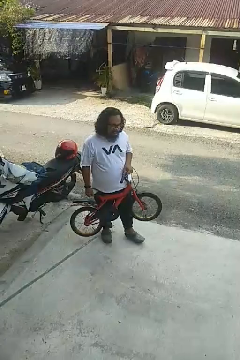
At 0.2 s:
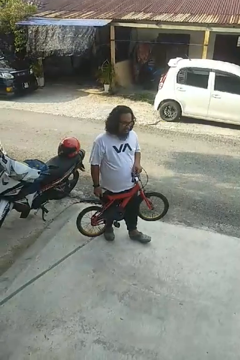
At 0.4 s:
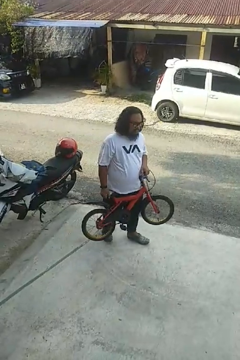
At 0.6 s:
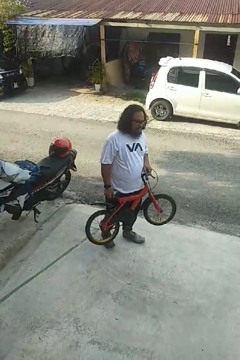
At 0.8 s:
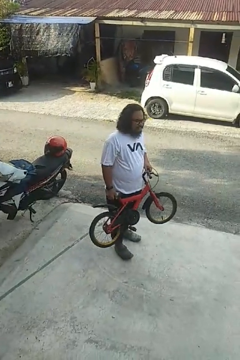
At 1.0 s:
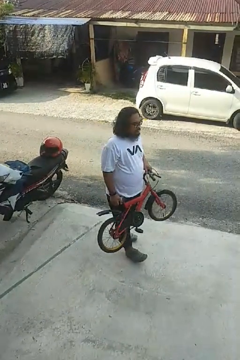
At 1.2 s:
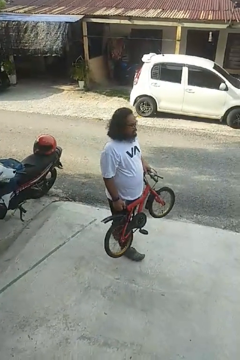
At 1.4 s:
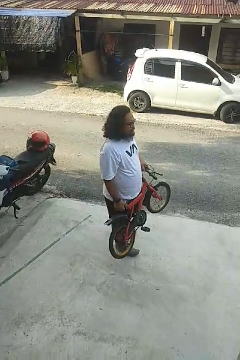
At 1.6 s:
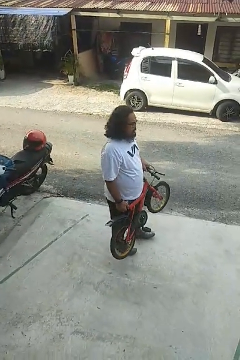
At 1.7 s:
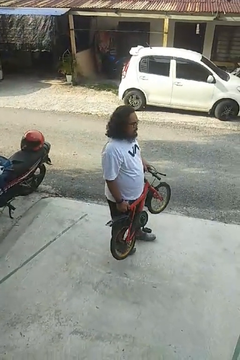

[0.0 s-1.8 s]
person carries bicycle

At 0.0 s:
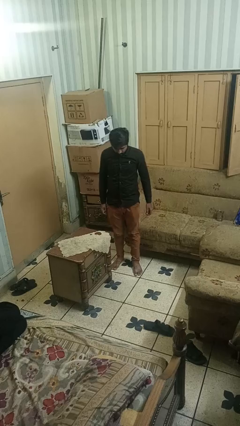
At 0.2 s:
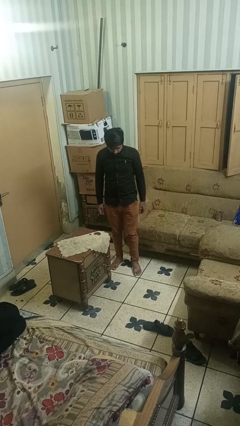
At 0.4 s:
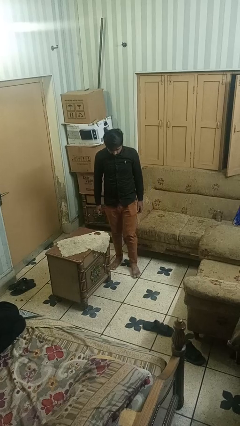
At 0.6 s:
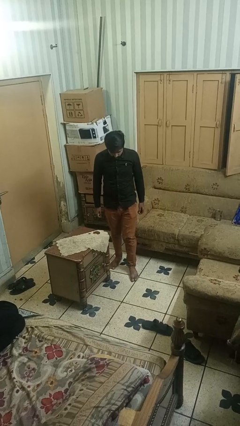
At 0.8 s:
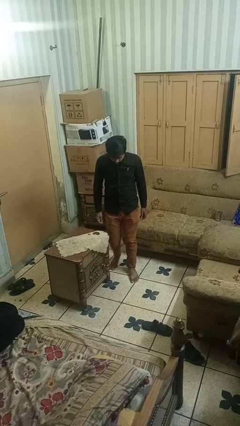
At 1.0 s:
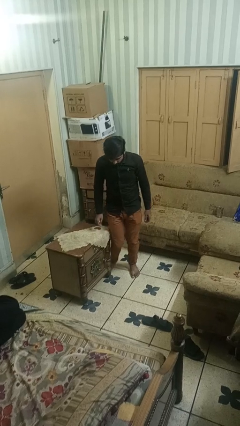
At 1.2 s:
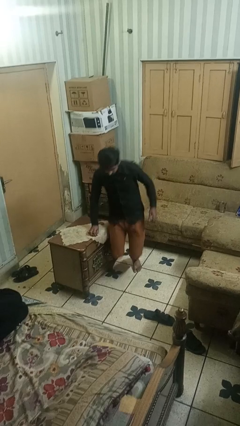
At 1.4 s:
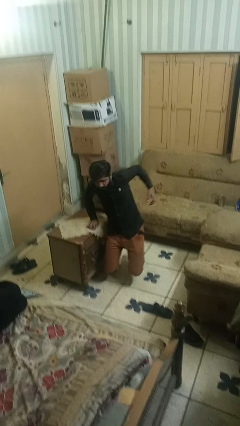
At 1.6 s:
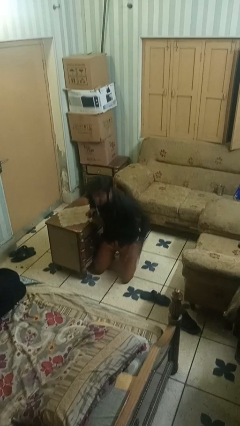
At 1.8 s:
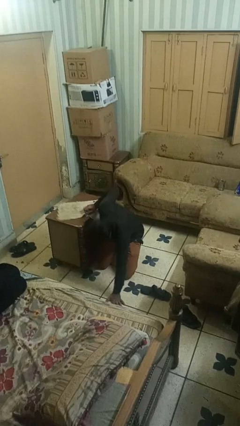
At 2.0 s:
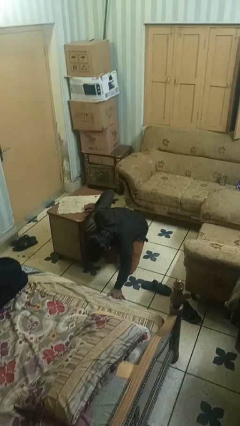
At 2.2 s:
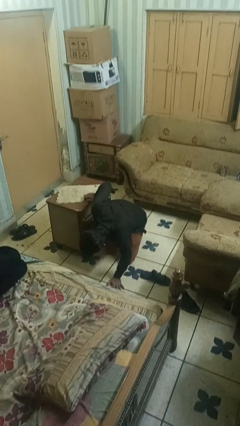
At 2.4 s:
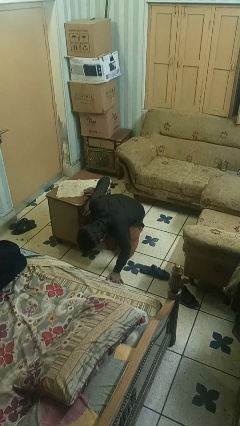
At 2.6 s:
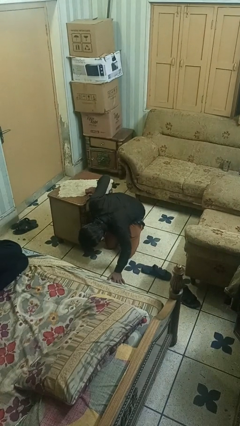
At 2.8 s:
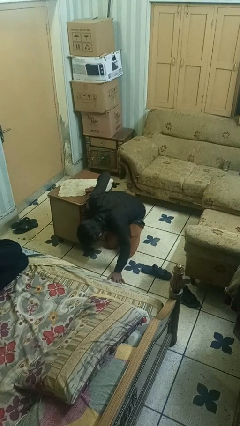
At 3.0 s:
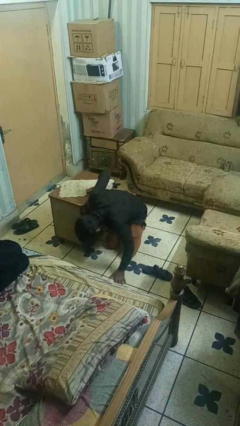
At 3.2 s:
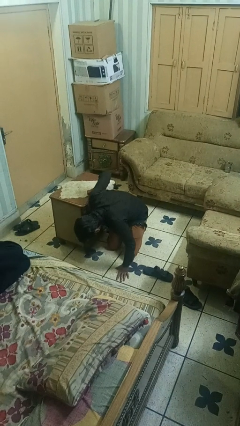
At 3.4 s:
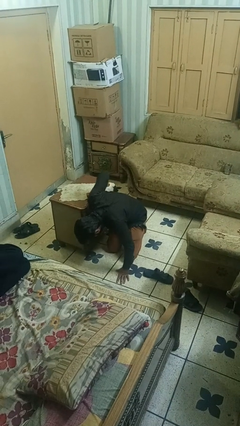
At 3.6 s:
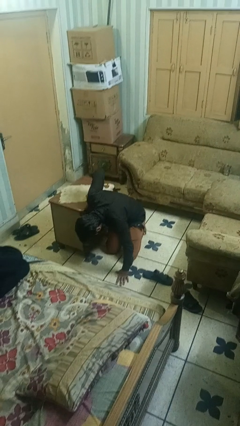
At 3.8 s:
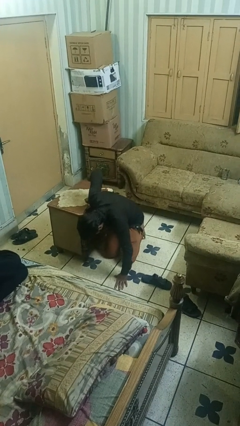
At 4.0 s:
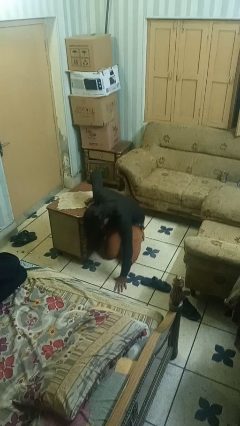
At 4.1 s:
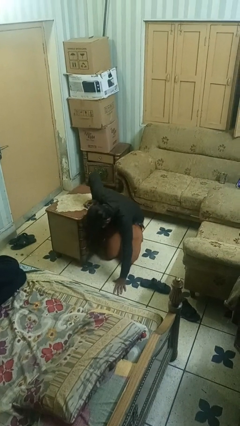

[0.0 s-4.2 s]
person bumps into table

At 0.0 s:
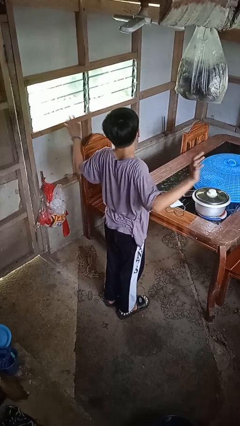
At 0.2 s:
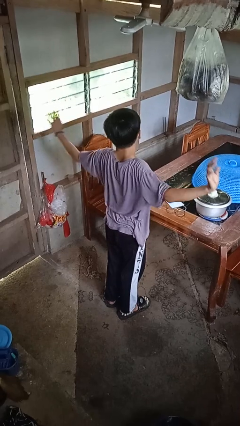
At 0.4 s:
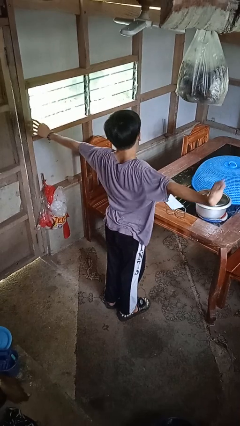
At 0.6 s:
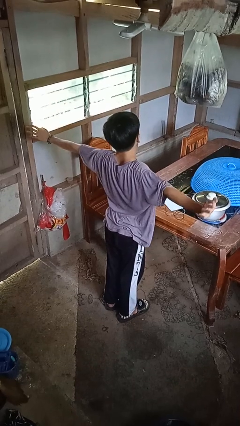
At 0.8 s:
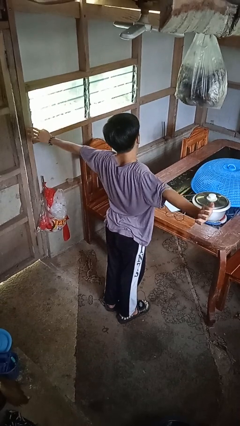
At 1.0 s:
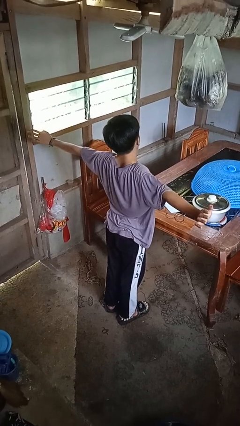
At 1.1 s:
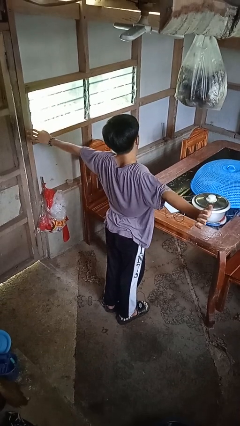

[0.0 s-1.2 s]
person stretches arms to side

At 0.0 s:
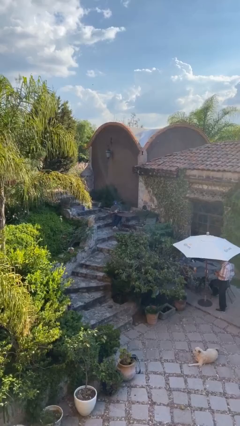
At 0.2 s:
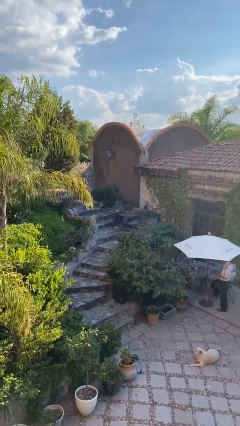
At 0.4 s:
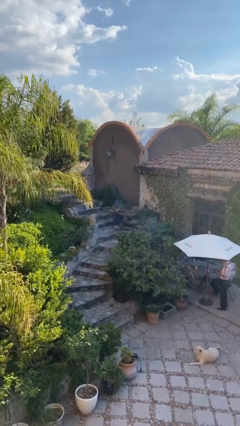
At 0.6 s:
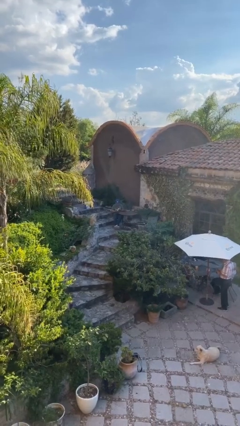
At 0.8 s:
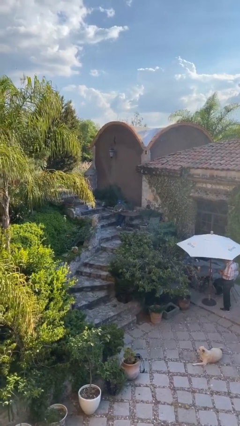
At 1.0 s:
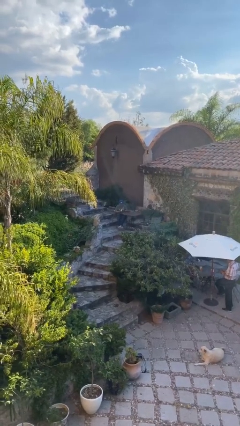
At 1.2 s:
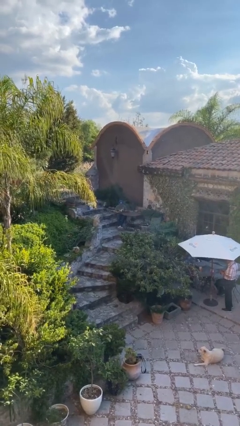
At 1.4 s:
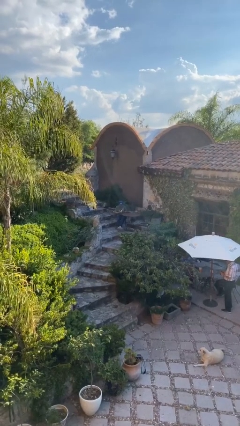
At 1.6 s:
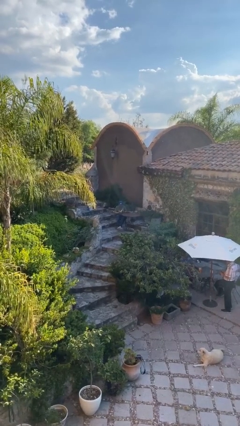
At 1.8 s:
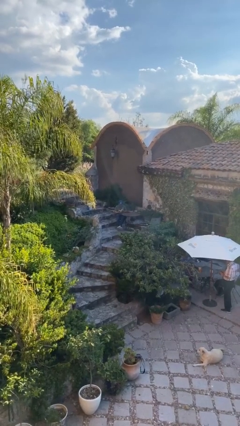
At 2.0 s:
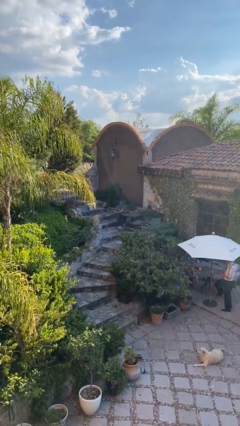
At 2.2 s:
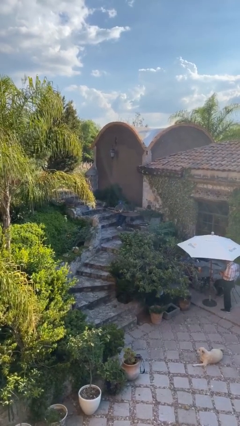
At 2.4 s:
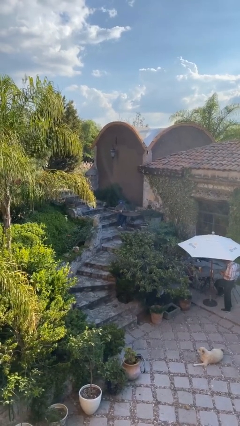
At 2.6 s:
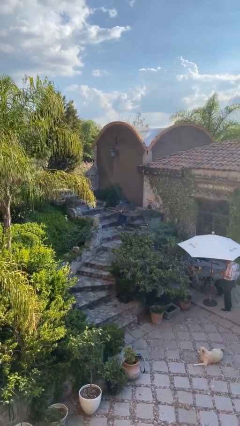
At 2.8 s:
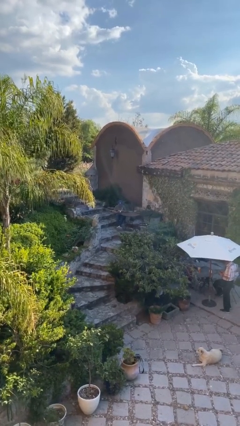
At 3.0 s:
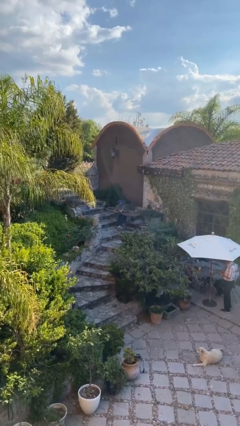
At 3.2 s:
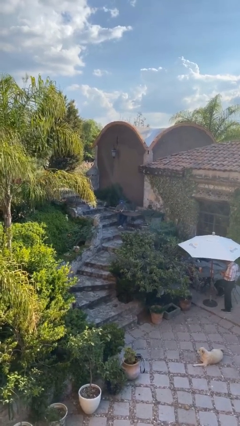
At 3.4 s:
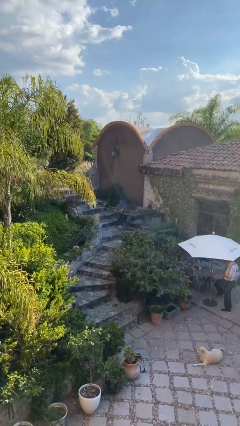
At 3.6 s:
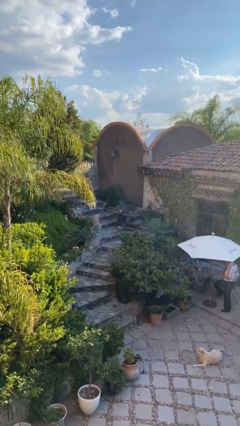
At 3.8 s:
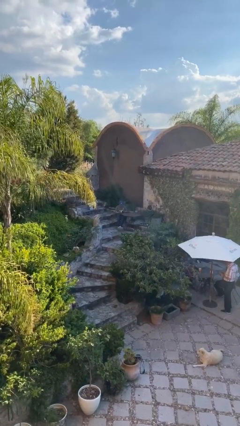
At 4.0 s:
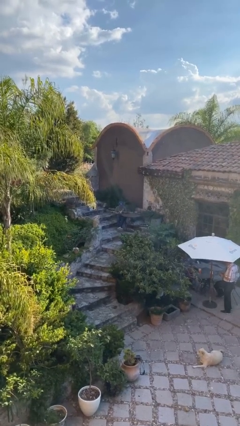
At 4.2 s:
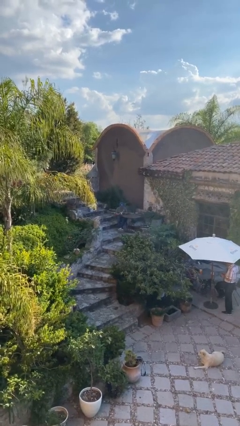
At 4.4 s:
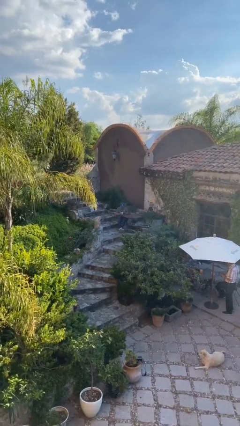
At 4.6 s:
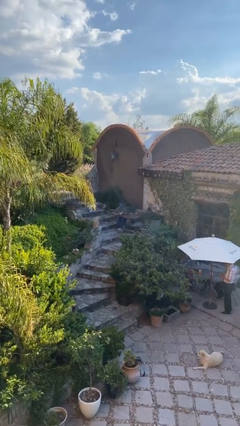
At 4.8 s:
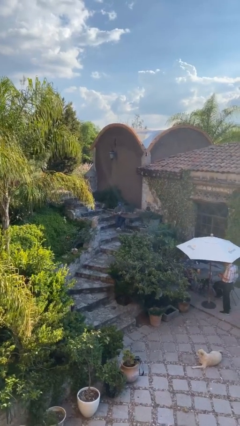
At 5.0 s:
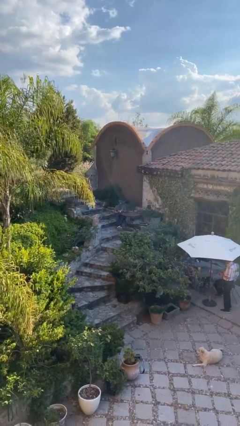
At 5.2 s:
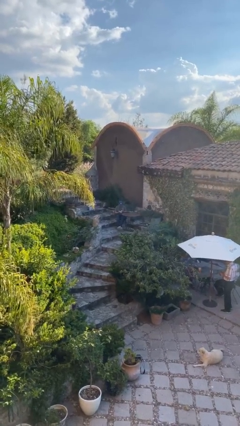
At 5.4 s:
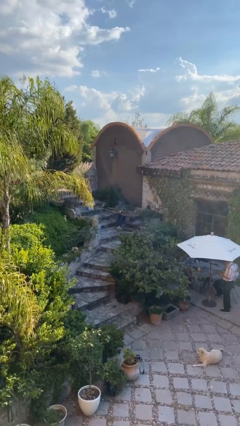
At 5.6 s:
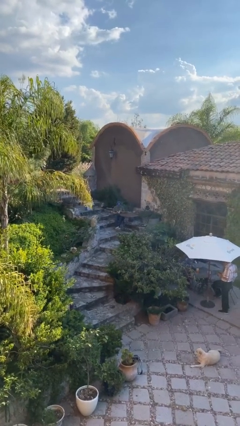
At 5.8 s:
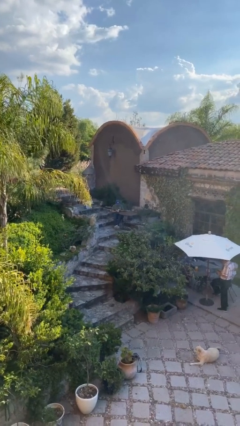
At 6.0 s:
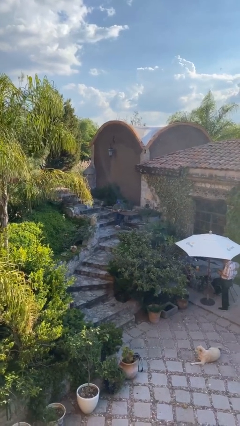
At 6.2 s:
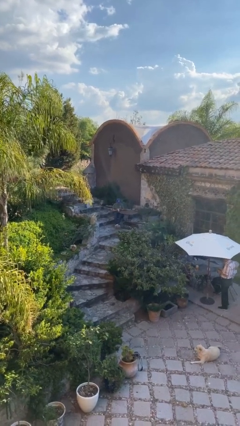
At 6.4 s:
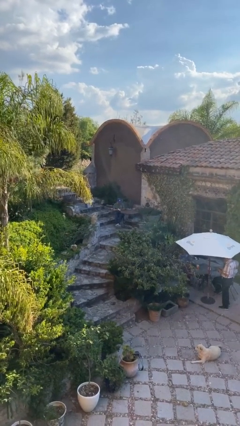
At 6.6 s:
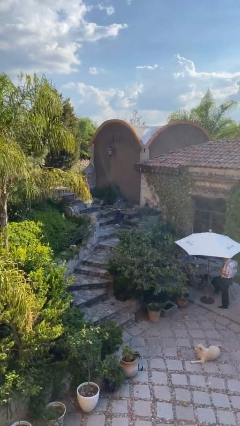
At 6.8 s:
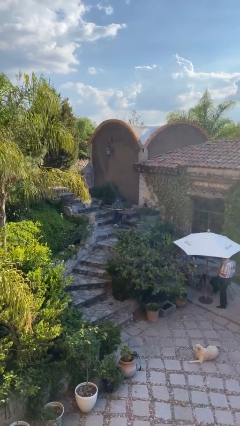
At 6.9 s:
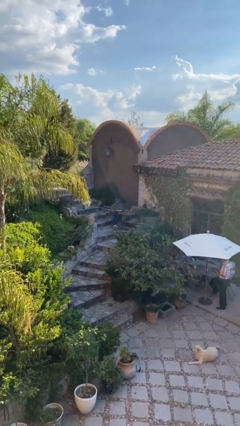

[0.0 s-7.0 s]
person reads document

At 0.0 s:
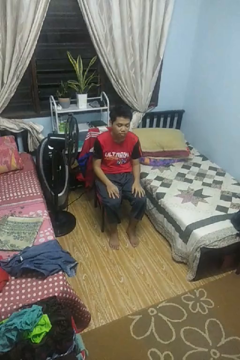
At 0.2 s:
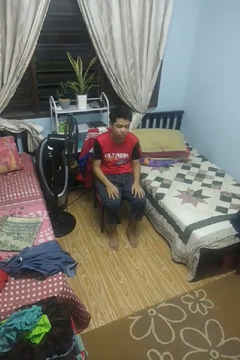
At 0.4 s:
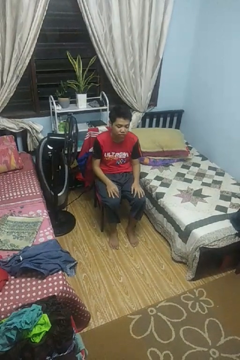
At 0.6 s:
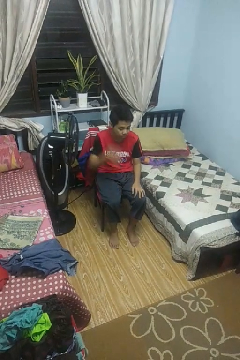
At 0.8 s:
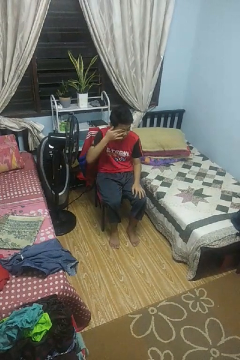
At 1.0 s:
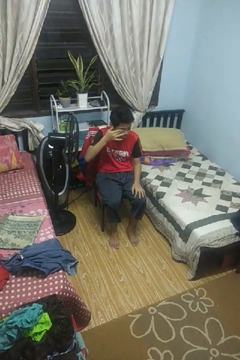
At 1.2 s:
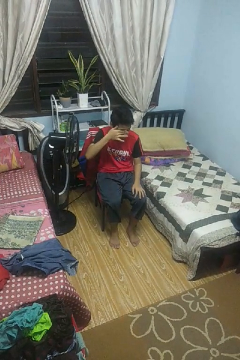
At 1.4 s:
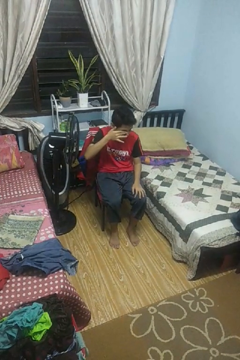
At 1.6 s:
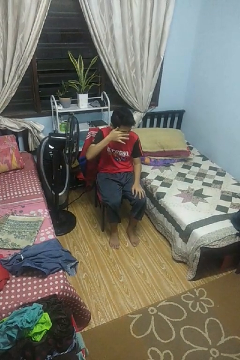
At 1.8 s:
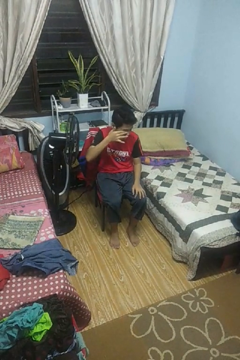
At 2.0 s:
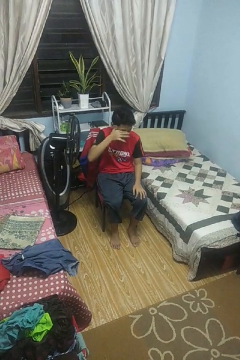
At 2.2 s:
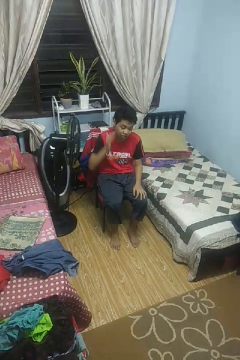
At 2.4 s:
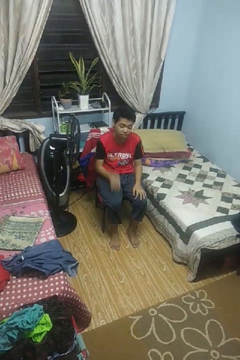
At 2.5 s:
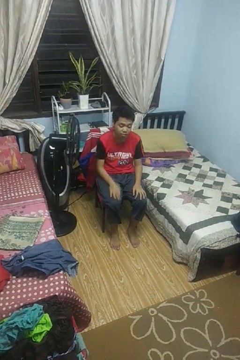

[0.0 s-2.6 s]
person rubs eyes

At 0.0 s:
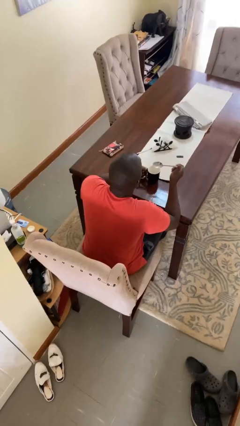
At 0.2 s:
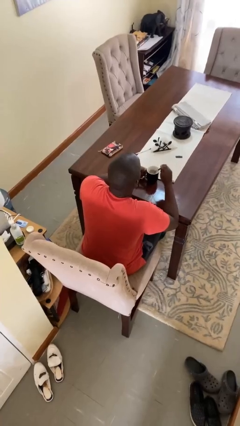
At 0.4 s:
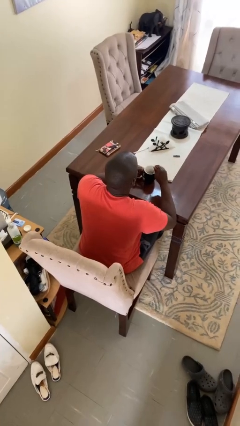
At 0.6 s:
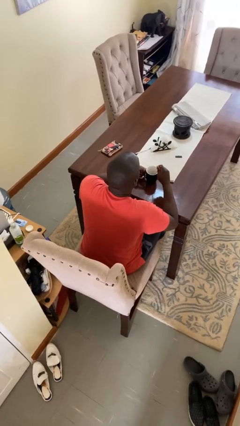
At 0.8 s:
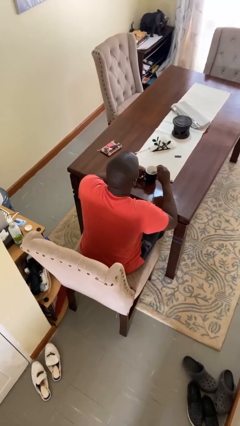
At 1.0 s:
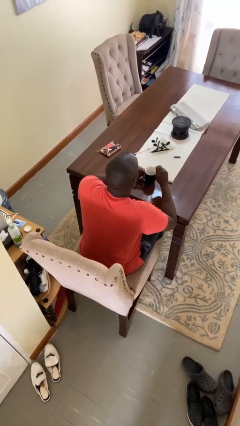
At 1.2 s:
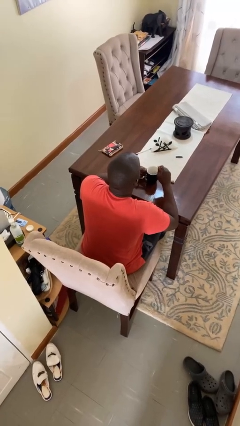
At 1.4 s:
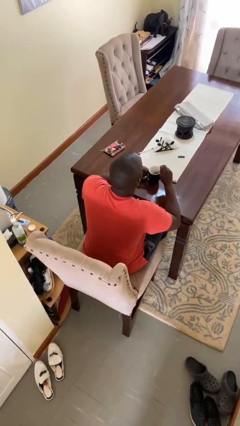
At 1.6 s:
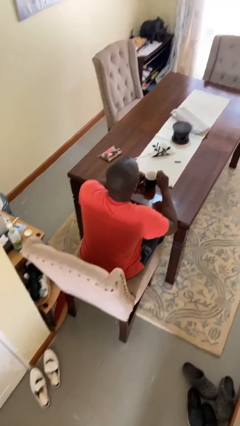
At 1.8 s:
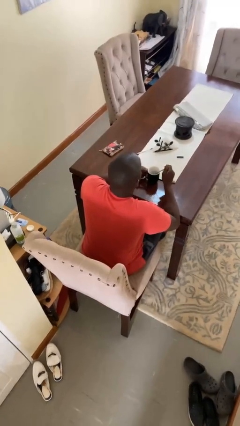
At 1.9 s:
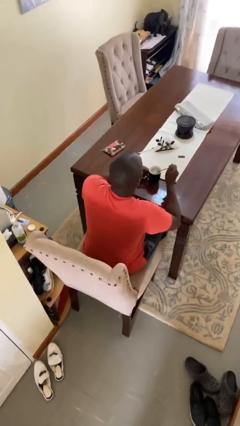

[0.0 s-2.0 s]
person stirs mug
